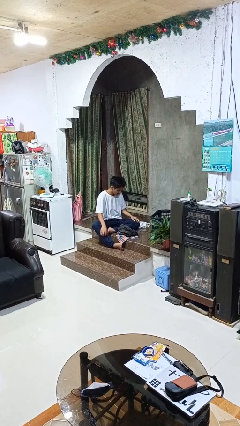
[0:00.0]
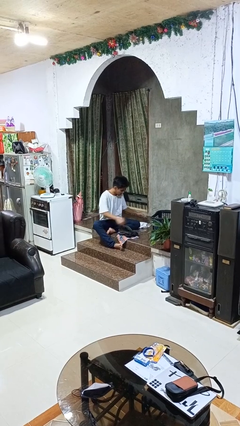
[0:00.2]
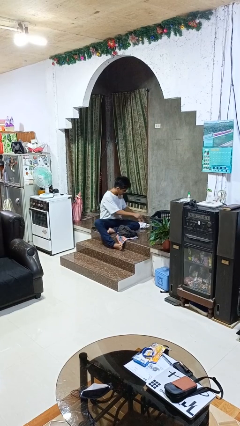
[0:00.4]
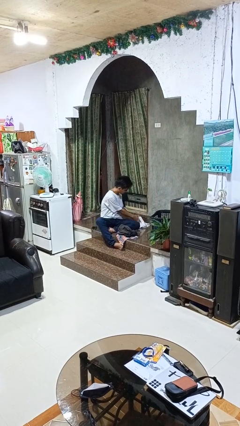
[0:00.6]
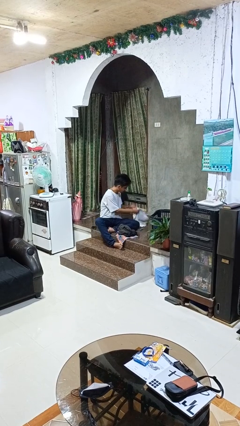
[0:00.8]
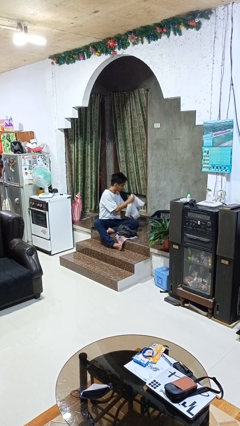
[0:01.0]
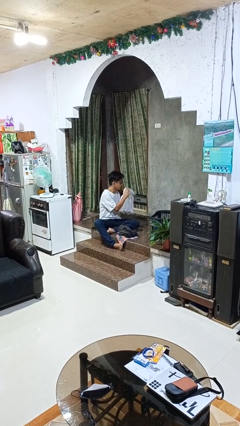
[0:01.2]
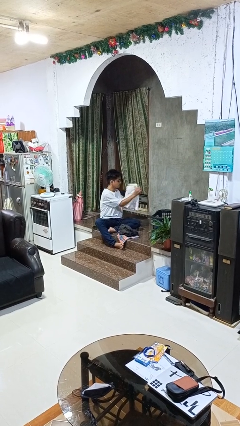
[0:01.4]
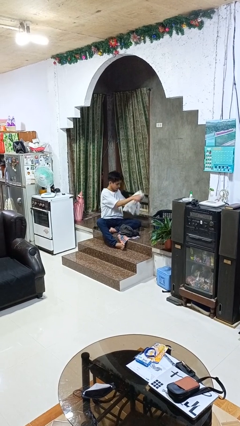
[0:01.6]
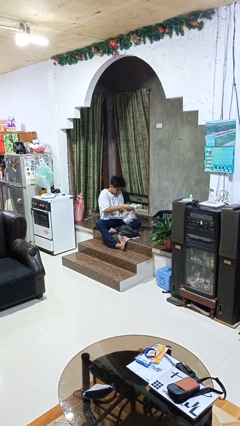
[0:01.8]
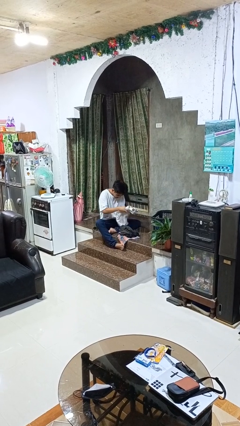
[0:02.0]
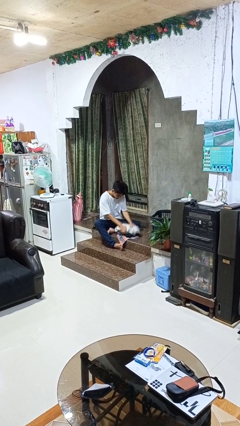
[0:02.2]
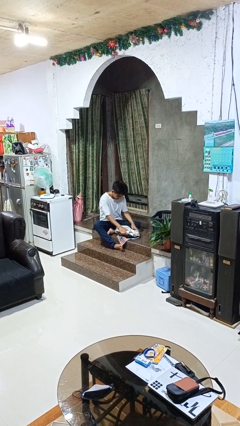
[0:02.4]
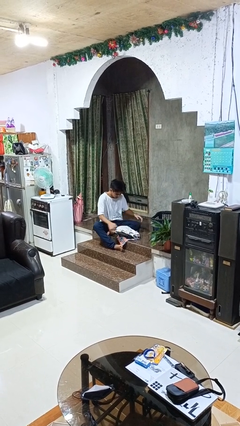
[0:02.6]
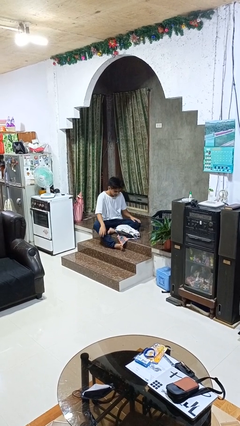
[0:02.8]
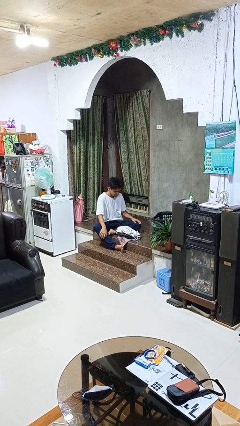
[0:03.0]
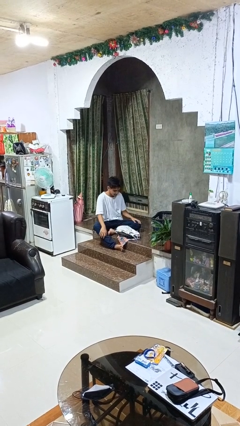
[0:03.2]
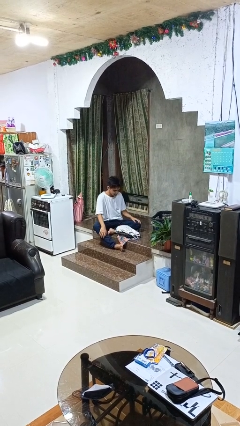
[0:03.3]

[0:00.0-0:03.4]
person folds pants

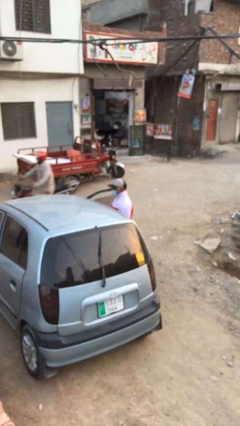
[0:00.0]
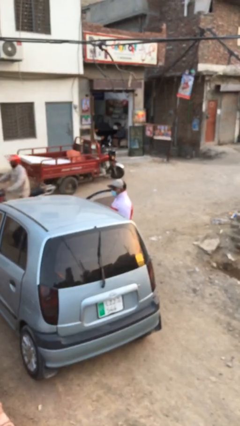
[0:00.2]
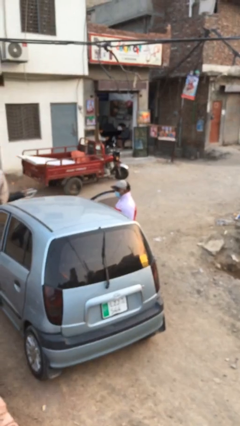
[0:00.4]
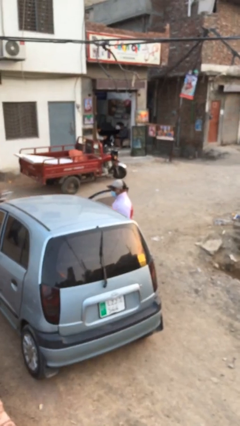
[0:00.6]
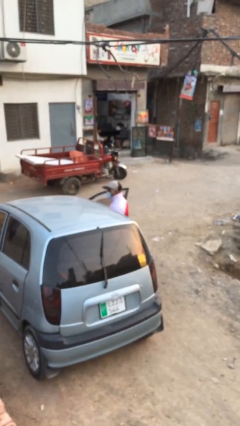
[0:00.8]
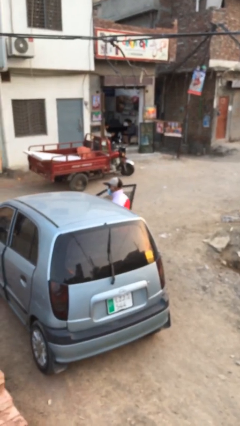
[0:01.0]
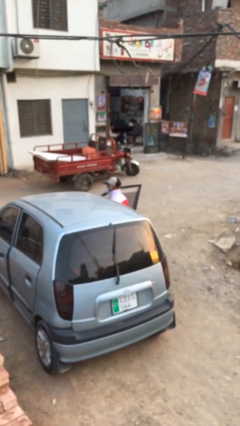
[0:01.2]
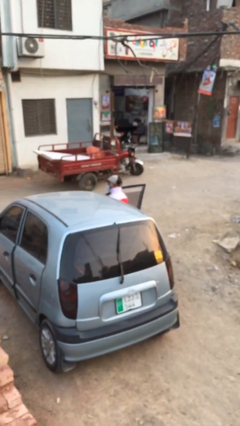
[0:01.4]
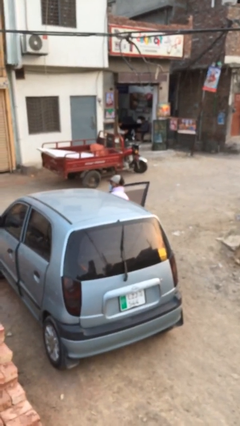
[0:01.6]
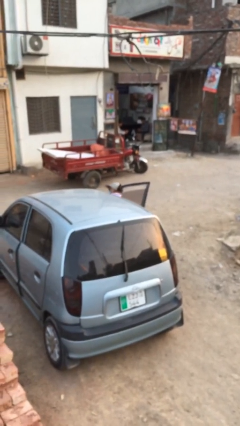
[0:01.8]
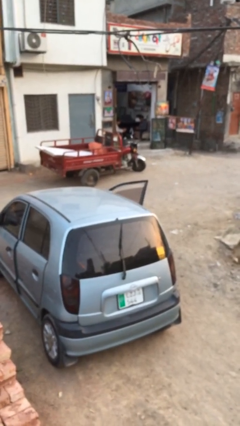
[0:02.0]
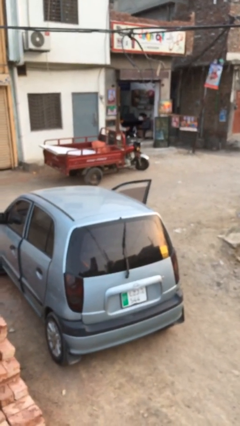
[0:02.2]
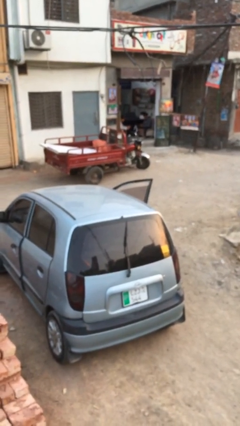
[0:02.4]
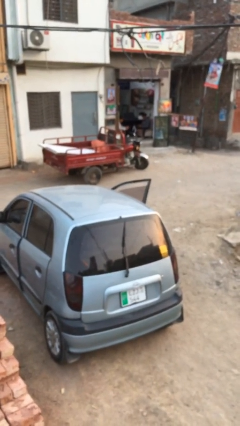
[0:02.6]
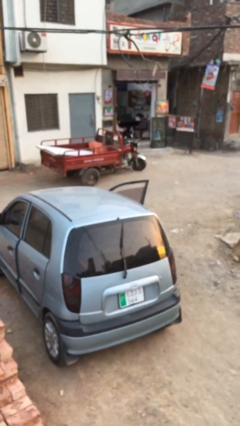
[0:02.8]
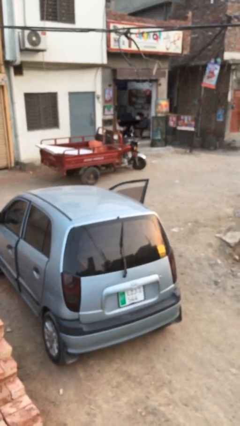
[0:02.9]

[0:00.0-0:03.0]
person enters car

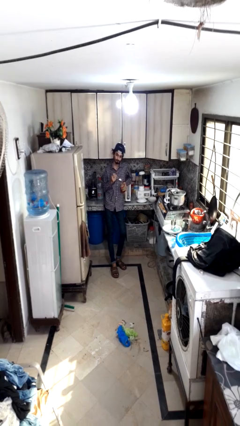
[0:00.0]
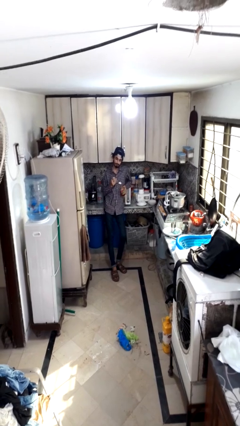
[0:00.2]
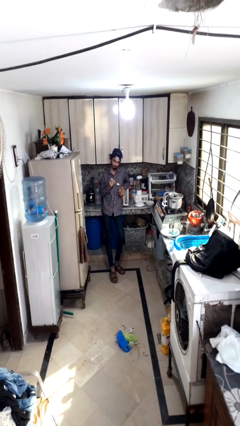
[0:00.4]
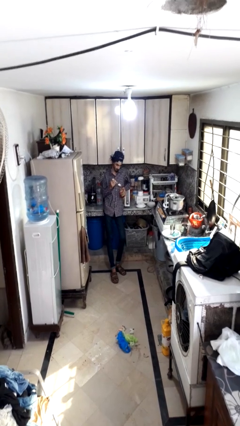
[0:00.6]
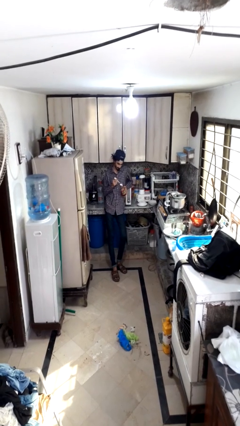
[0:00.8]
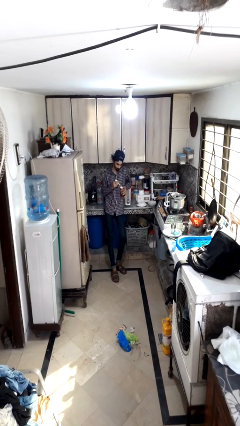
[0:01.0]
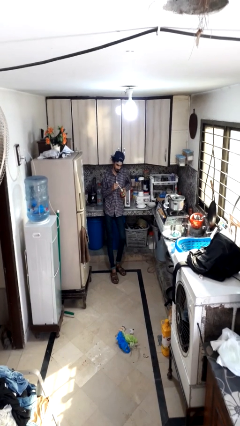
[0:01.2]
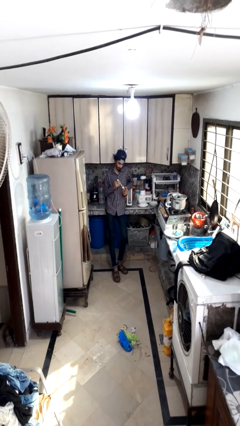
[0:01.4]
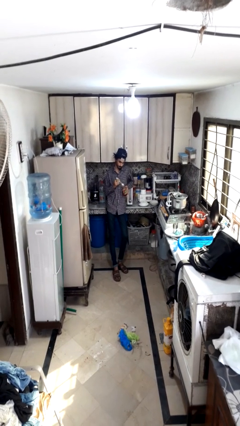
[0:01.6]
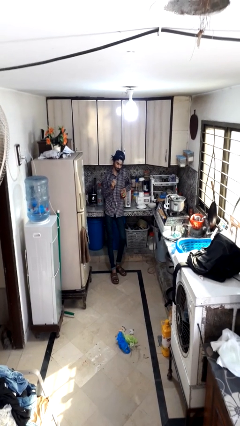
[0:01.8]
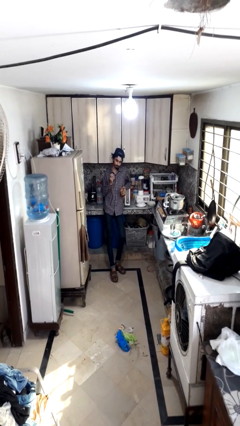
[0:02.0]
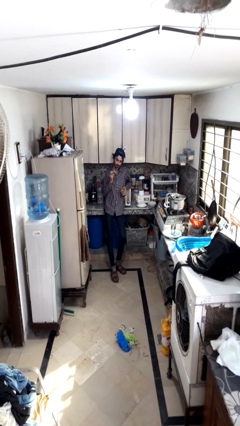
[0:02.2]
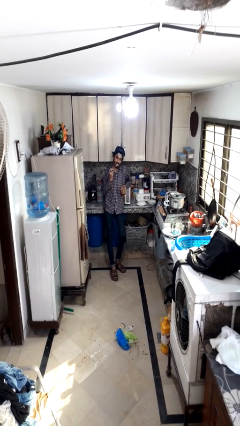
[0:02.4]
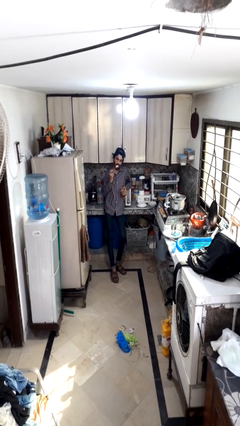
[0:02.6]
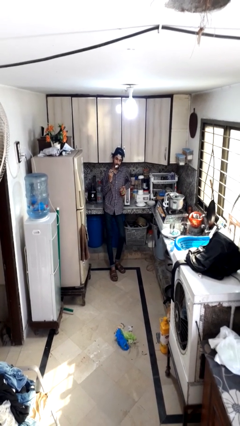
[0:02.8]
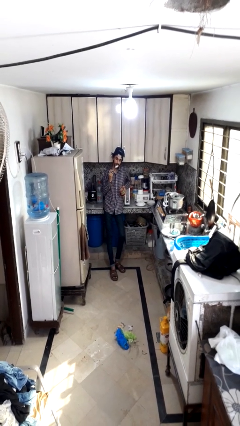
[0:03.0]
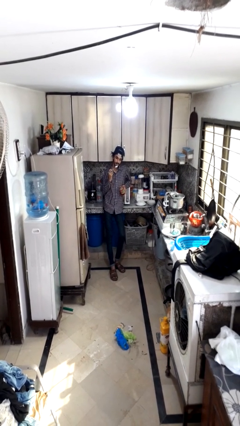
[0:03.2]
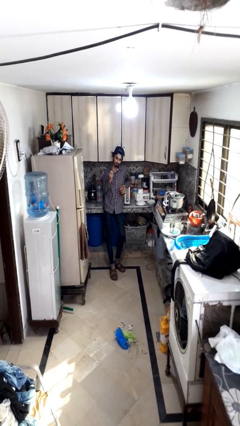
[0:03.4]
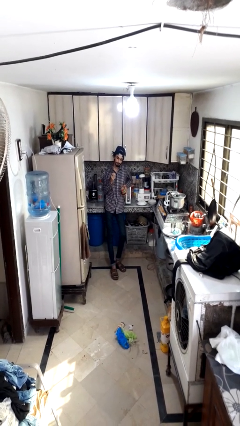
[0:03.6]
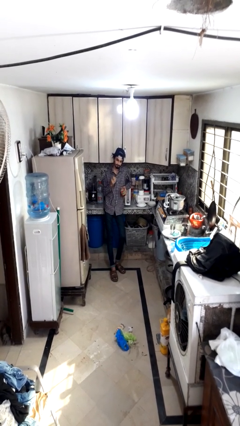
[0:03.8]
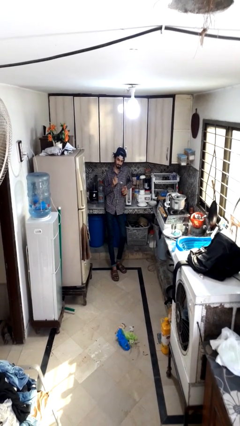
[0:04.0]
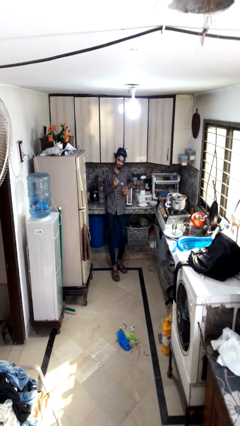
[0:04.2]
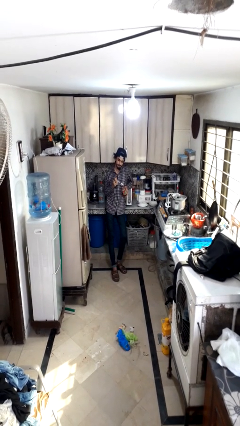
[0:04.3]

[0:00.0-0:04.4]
person eats with utensil

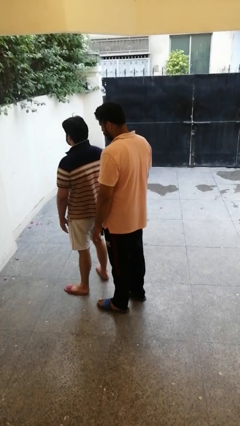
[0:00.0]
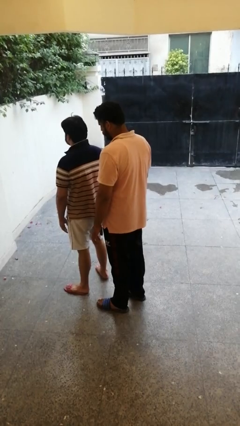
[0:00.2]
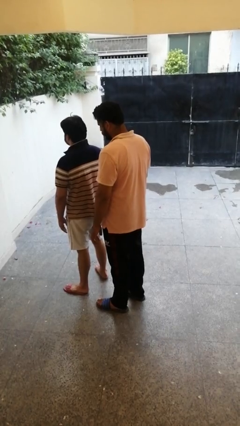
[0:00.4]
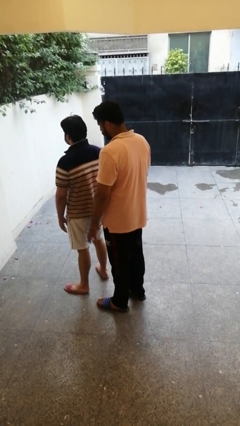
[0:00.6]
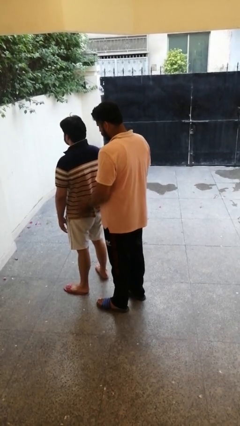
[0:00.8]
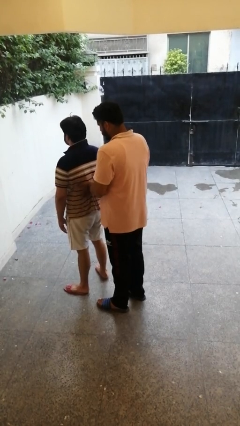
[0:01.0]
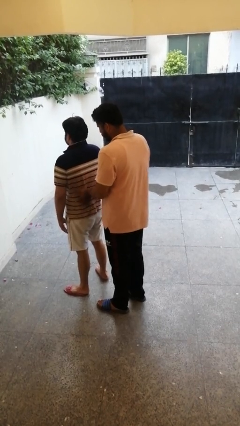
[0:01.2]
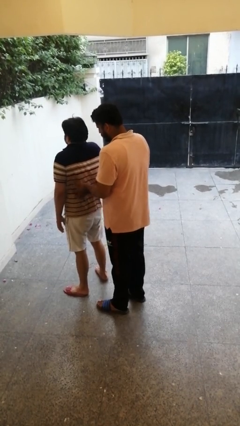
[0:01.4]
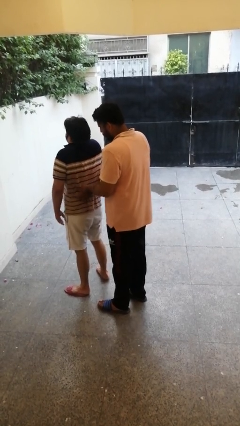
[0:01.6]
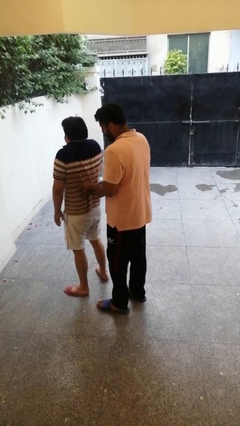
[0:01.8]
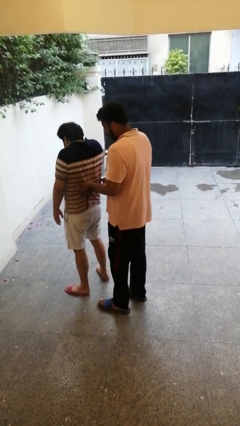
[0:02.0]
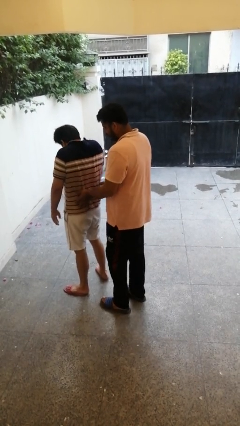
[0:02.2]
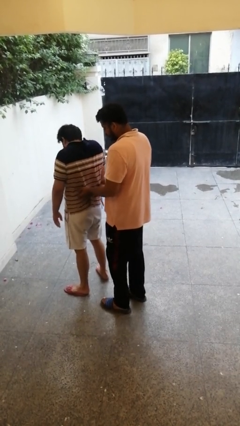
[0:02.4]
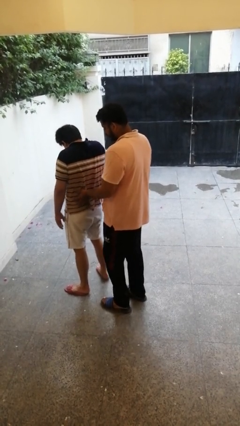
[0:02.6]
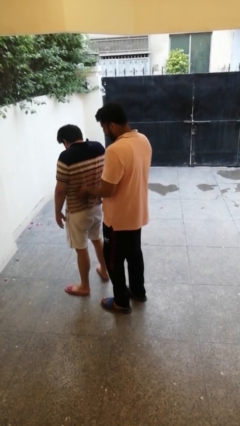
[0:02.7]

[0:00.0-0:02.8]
person tickles person

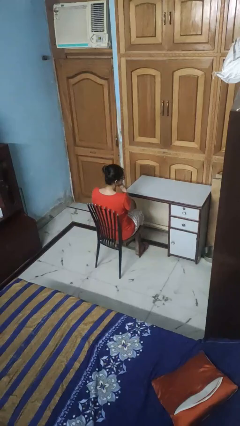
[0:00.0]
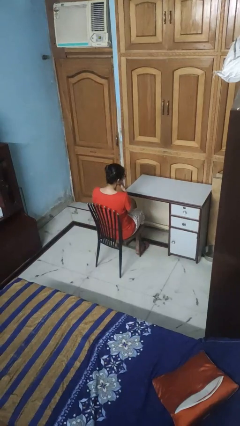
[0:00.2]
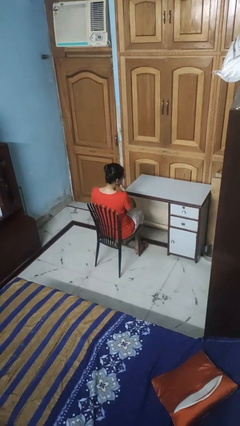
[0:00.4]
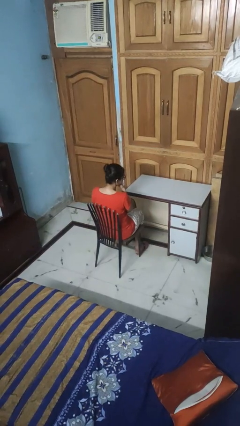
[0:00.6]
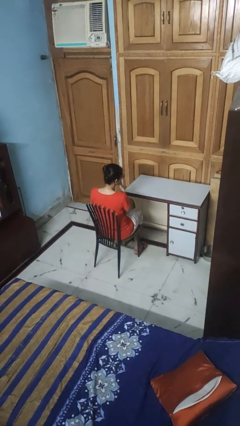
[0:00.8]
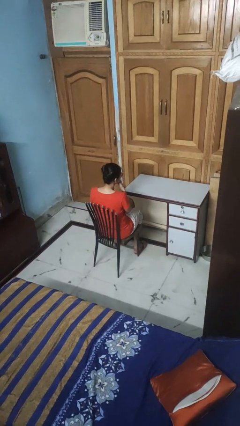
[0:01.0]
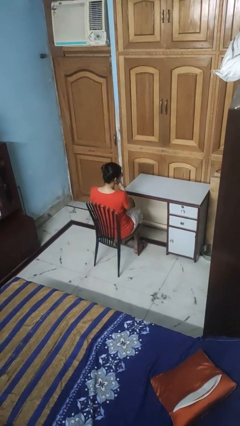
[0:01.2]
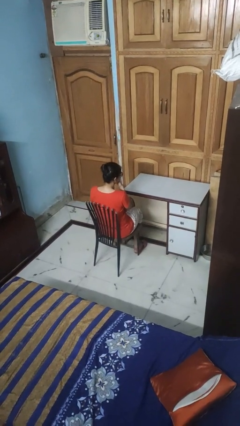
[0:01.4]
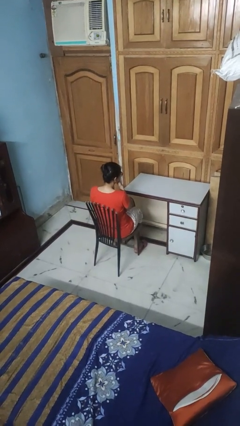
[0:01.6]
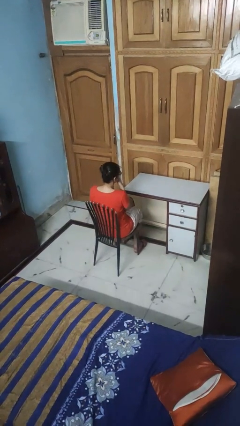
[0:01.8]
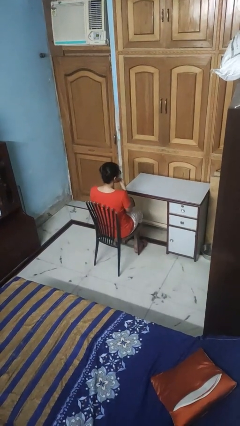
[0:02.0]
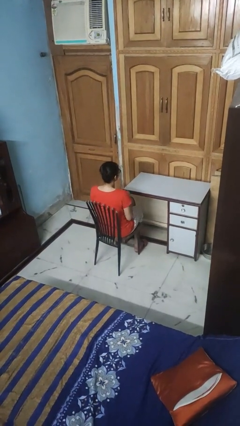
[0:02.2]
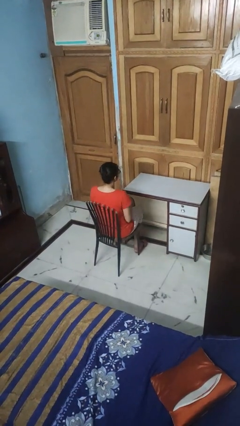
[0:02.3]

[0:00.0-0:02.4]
person strokes chin

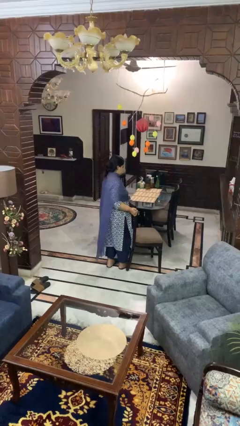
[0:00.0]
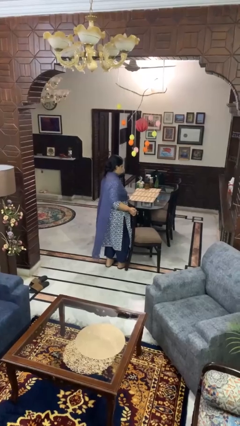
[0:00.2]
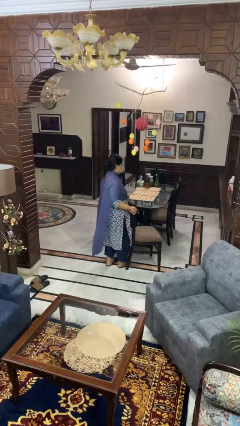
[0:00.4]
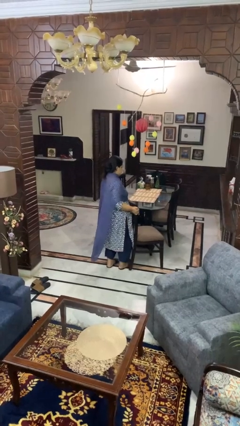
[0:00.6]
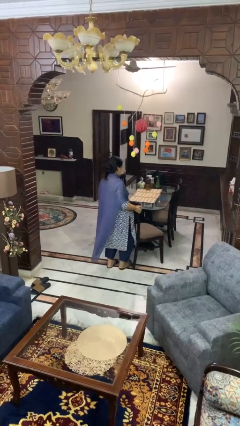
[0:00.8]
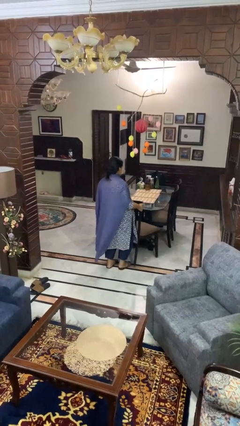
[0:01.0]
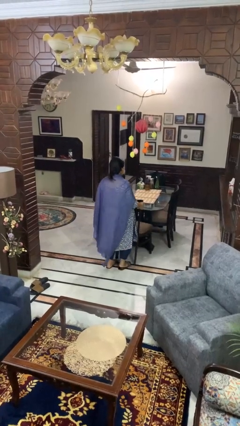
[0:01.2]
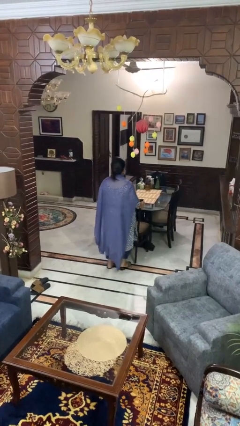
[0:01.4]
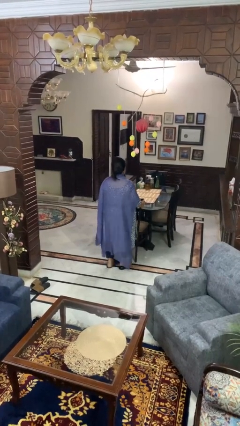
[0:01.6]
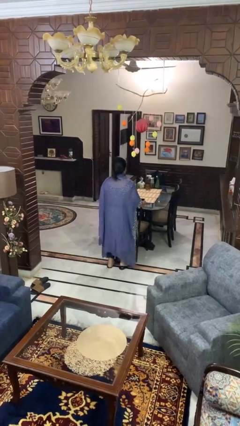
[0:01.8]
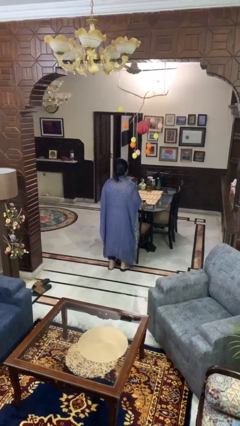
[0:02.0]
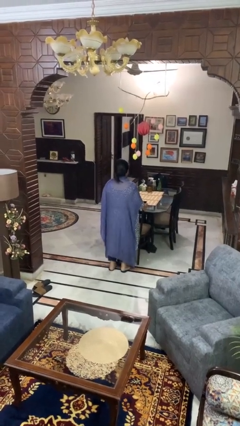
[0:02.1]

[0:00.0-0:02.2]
person pushes in chair
